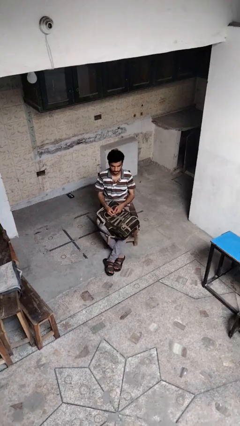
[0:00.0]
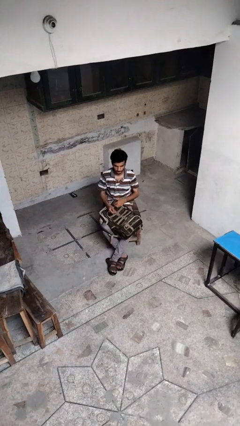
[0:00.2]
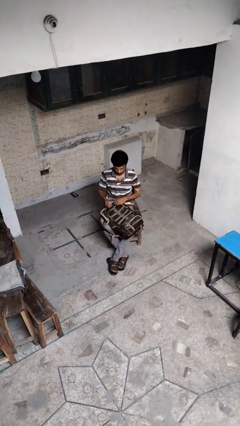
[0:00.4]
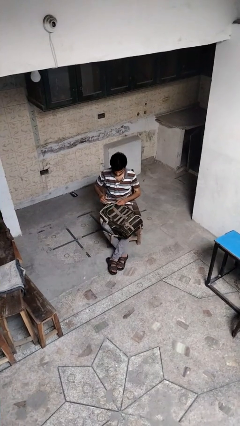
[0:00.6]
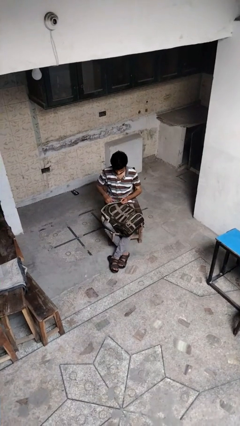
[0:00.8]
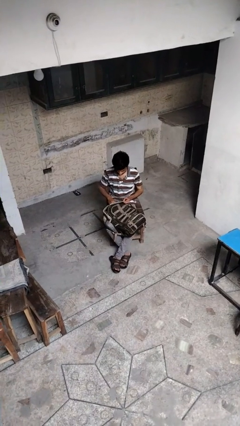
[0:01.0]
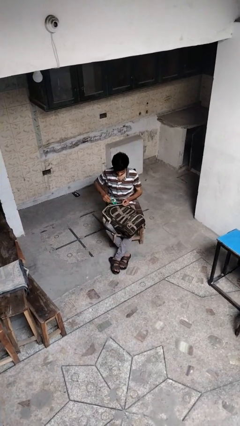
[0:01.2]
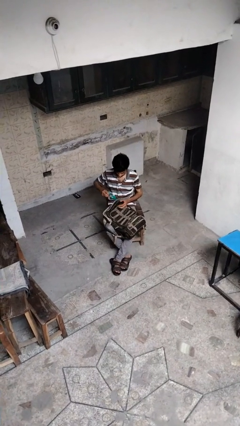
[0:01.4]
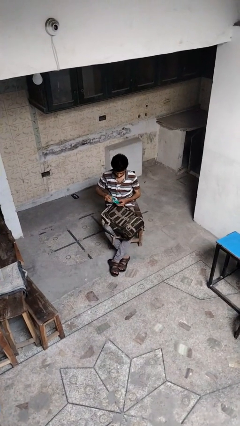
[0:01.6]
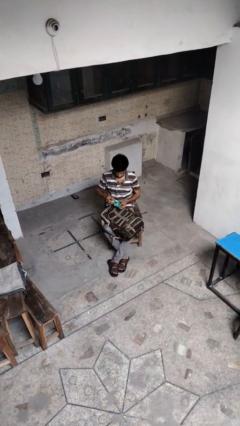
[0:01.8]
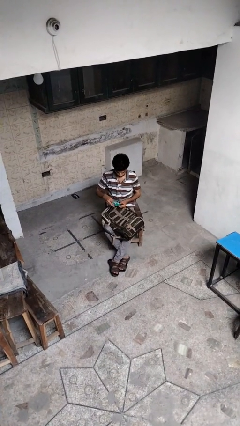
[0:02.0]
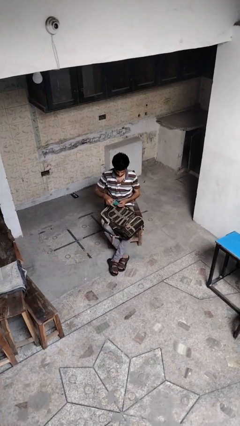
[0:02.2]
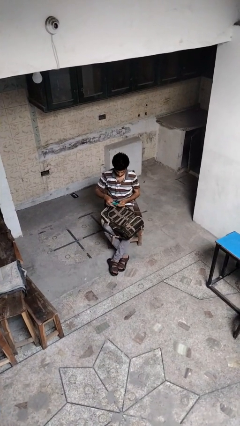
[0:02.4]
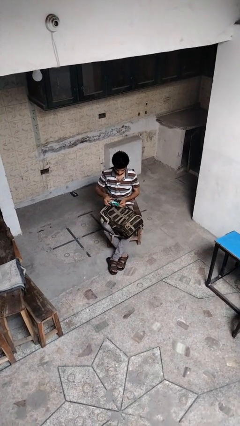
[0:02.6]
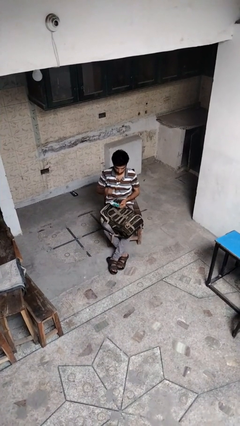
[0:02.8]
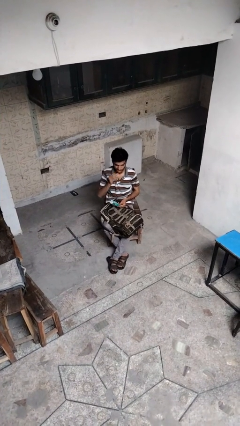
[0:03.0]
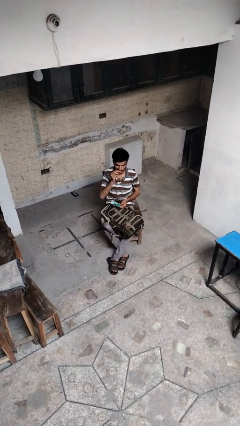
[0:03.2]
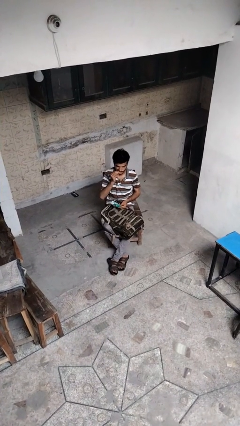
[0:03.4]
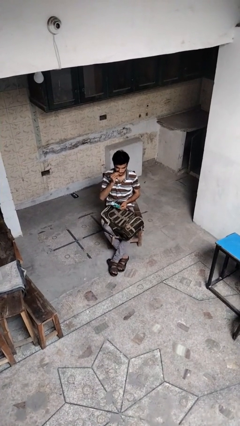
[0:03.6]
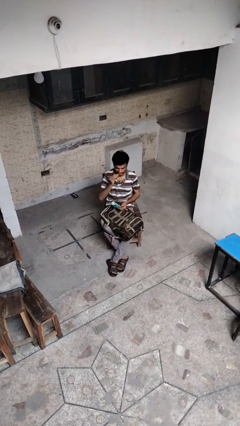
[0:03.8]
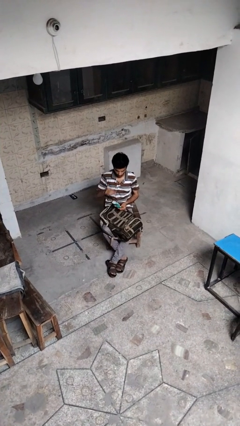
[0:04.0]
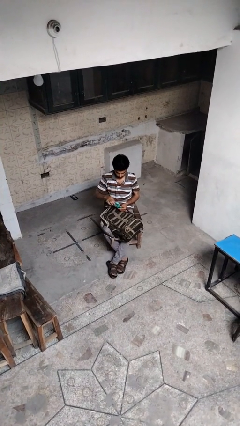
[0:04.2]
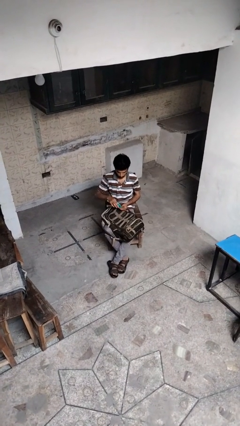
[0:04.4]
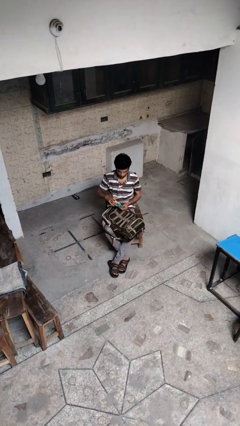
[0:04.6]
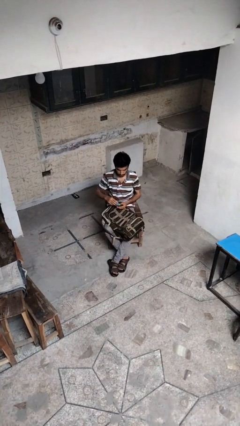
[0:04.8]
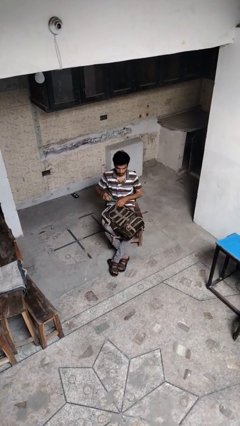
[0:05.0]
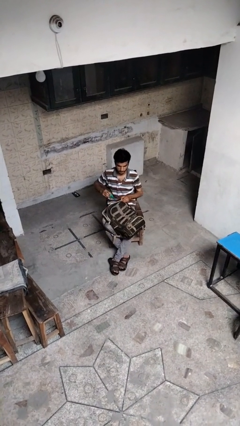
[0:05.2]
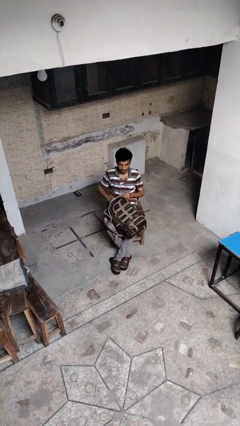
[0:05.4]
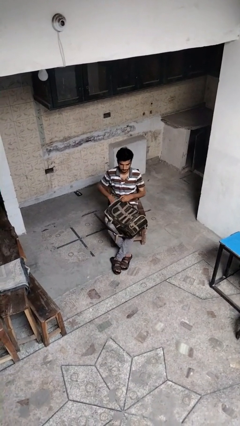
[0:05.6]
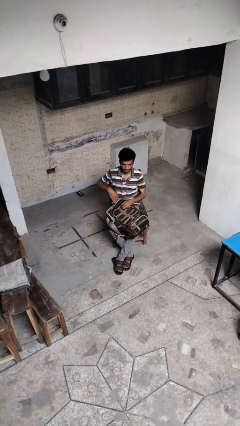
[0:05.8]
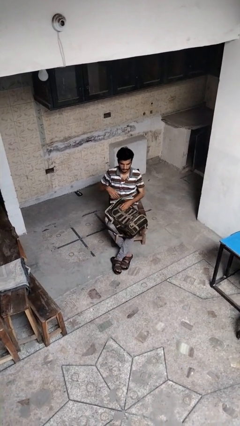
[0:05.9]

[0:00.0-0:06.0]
person eats snack from bag

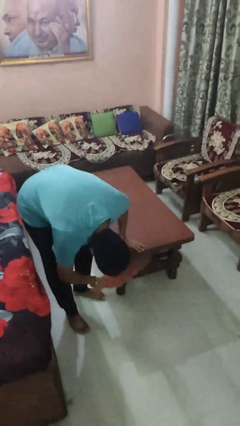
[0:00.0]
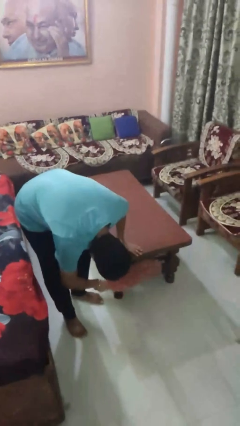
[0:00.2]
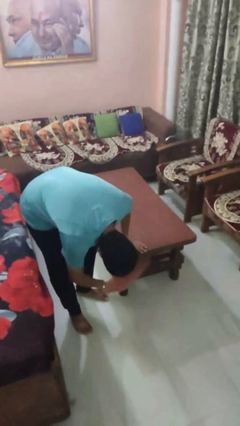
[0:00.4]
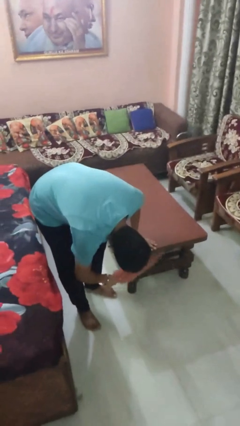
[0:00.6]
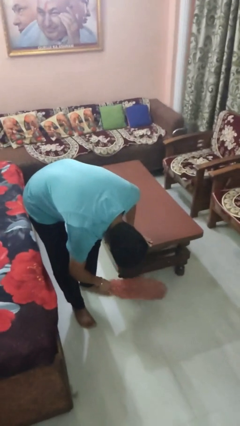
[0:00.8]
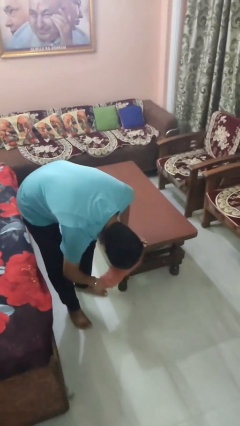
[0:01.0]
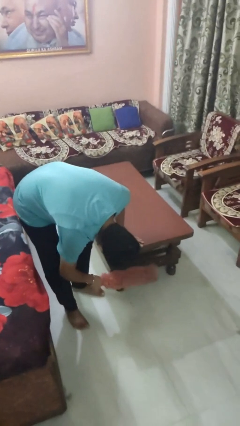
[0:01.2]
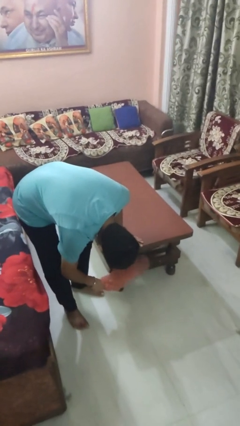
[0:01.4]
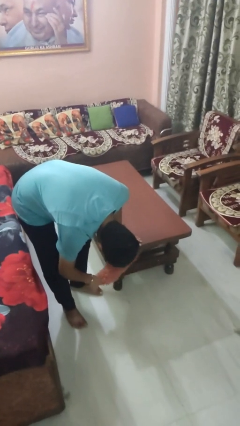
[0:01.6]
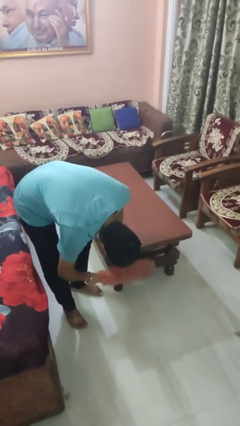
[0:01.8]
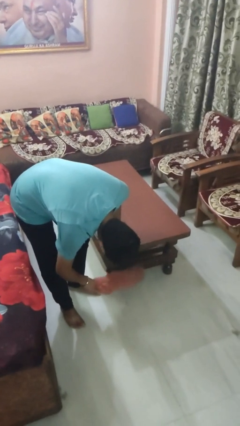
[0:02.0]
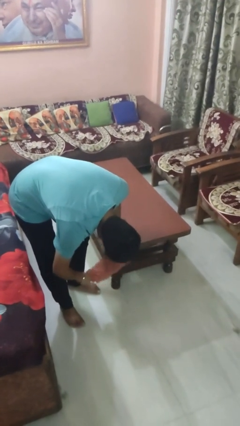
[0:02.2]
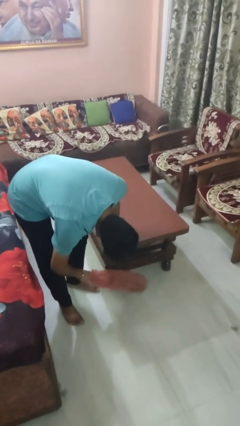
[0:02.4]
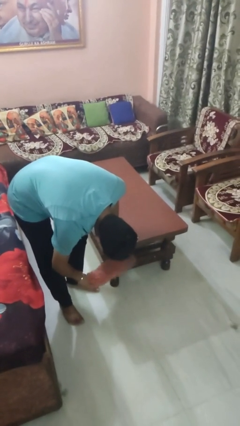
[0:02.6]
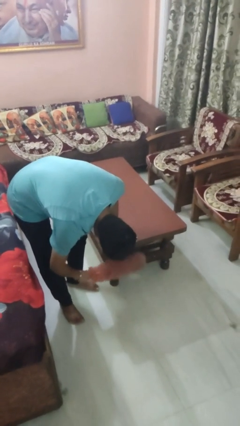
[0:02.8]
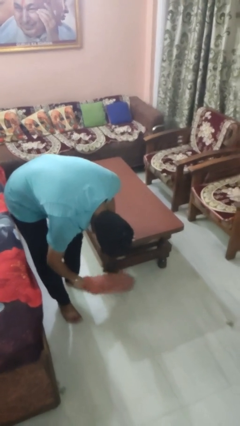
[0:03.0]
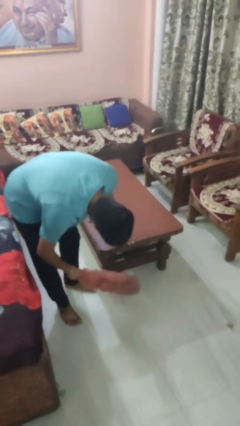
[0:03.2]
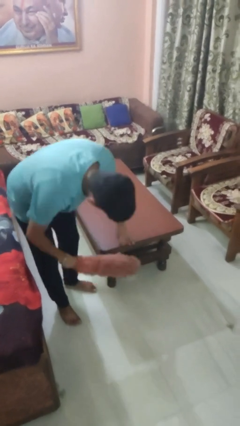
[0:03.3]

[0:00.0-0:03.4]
person dusts furniture

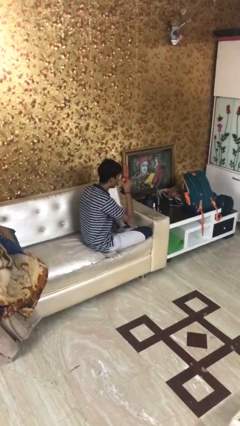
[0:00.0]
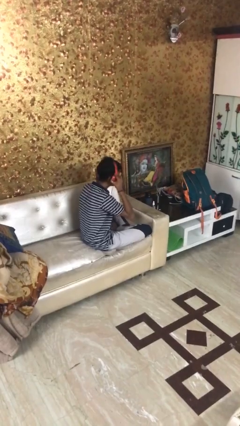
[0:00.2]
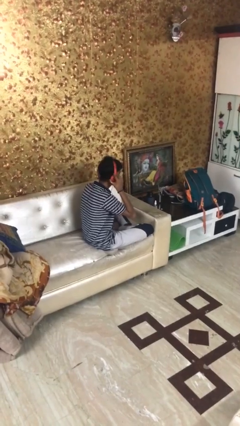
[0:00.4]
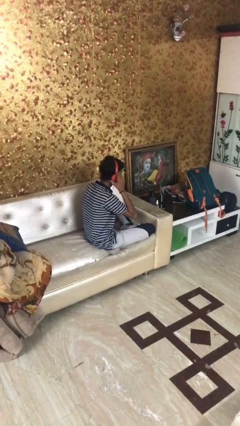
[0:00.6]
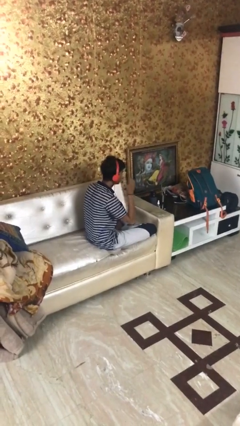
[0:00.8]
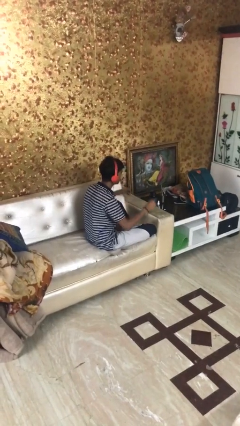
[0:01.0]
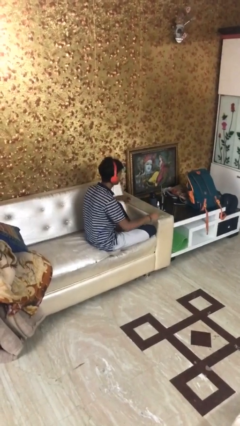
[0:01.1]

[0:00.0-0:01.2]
person puts on headphones

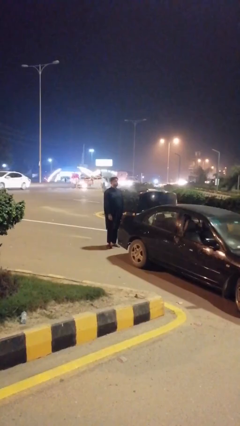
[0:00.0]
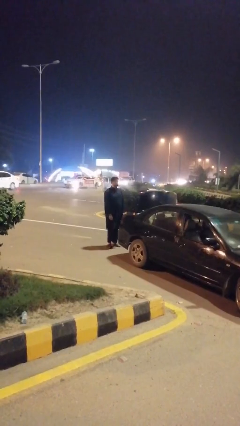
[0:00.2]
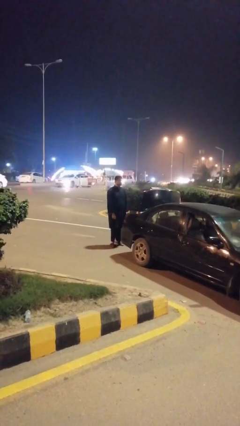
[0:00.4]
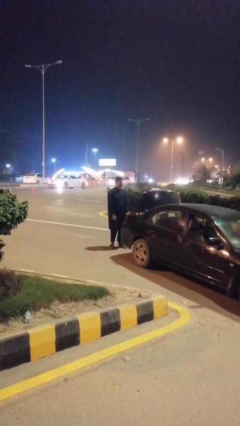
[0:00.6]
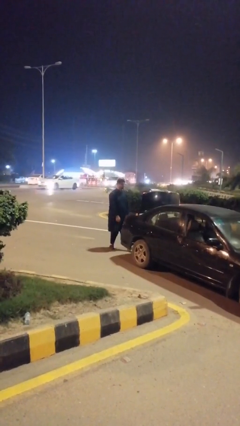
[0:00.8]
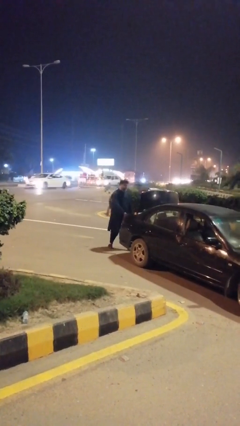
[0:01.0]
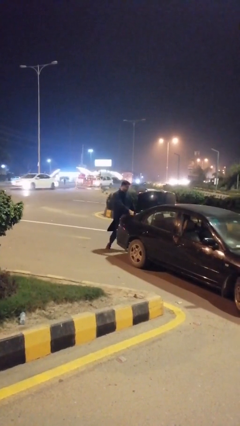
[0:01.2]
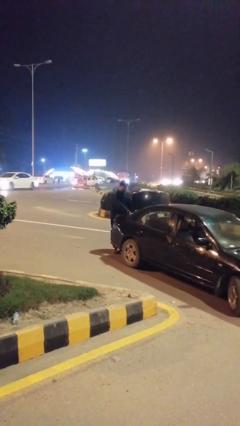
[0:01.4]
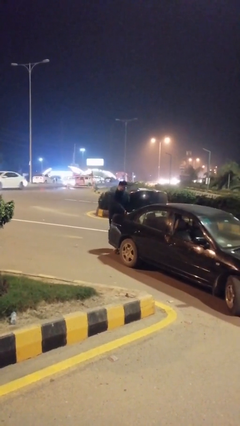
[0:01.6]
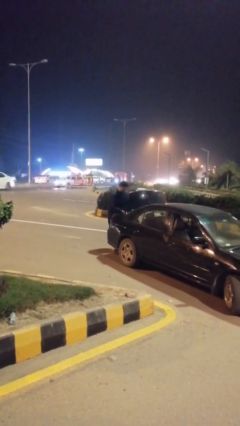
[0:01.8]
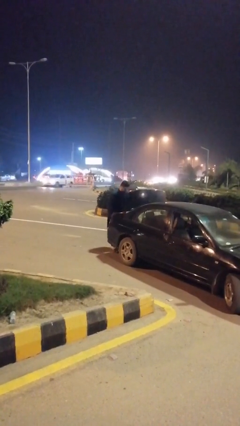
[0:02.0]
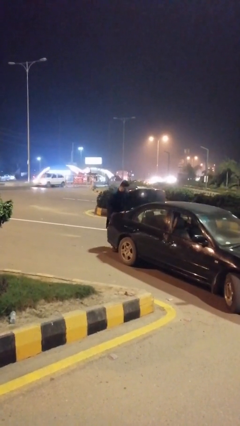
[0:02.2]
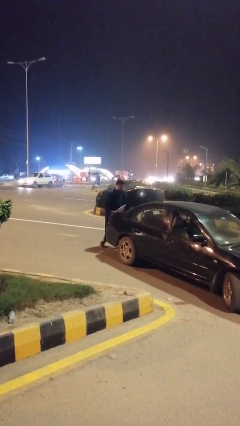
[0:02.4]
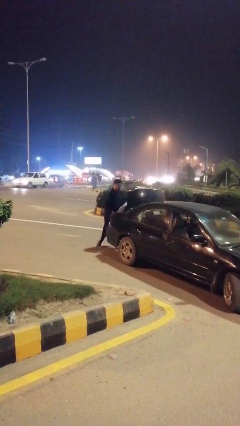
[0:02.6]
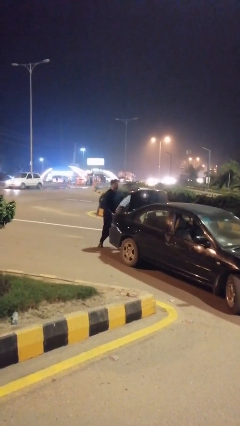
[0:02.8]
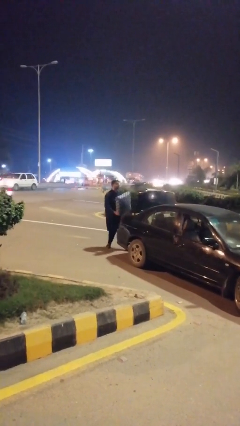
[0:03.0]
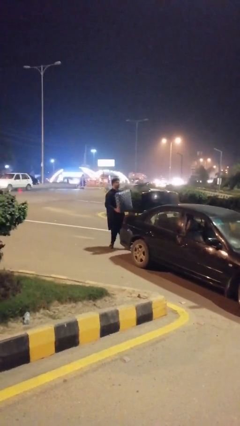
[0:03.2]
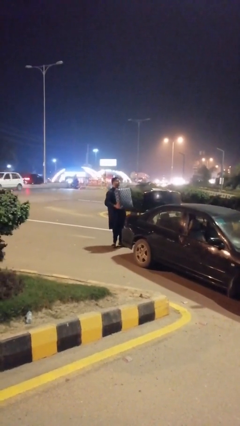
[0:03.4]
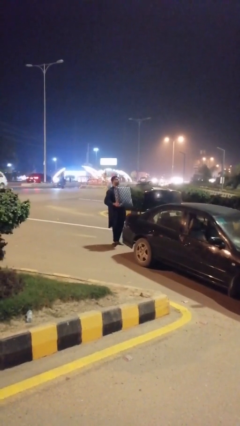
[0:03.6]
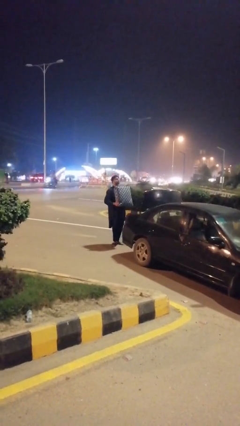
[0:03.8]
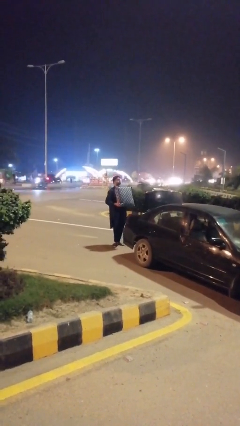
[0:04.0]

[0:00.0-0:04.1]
person unloads car

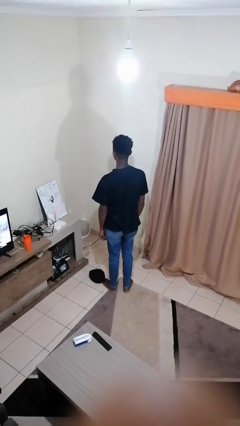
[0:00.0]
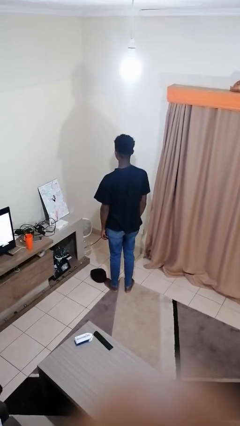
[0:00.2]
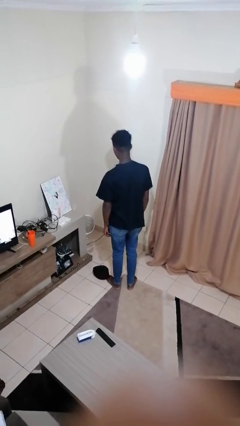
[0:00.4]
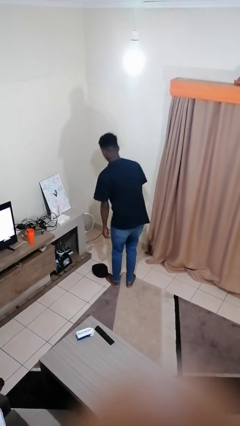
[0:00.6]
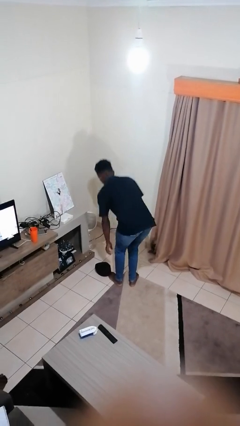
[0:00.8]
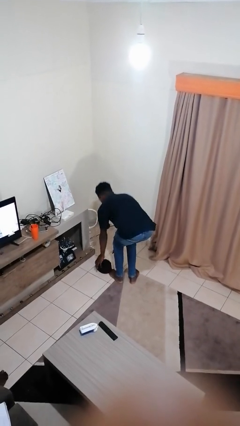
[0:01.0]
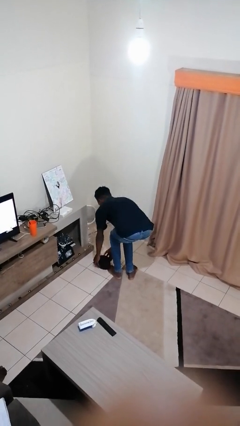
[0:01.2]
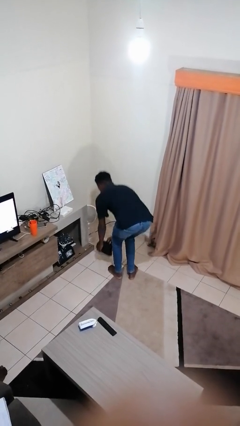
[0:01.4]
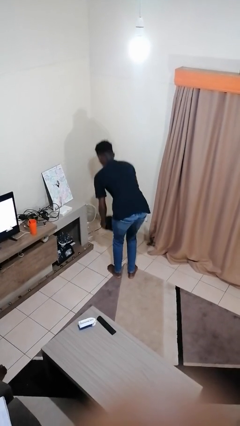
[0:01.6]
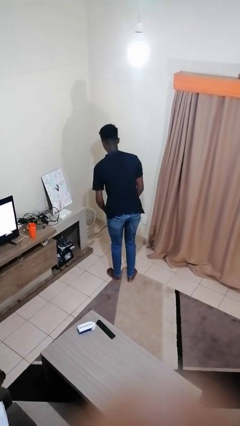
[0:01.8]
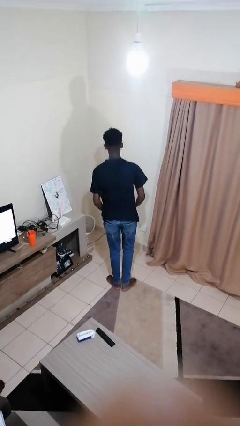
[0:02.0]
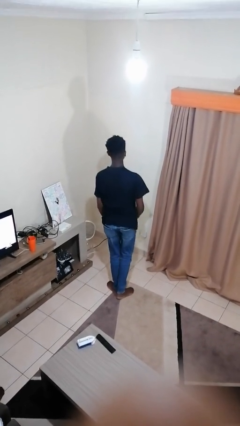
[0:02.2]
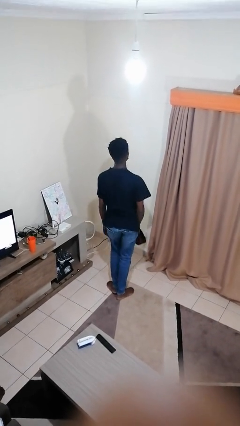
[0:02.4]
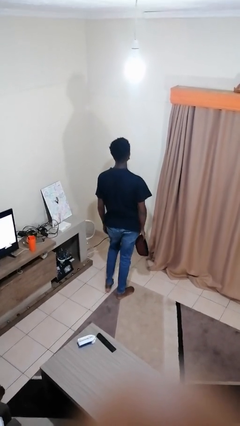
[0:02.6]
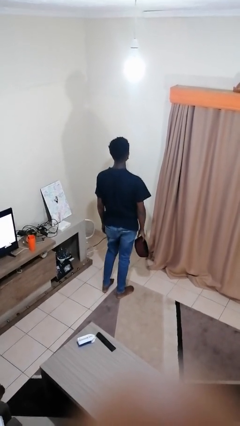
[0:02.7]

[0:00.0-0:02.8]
person picks up object from floor

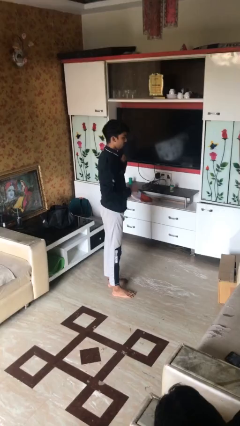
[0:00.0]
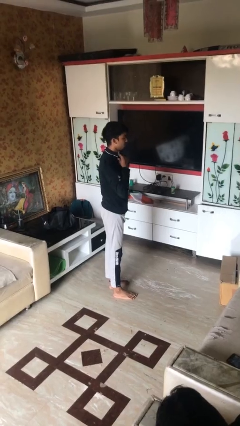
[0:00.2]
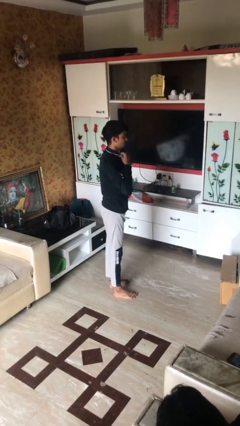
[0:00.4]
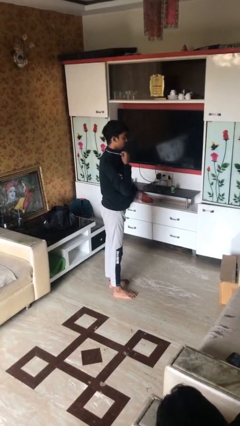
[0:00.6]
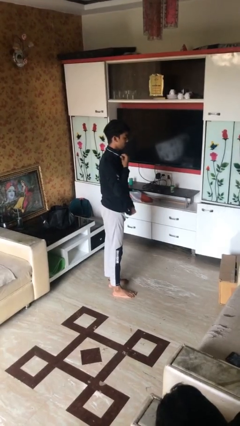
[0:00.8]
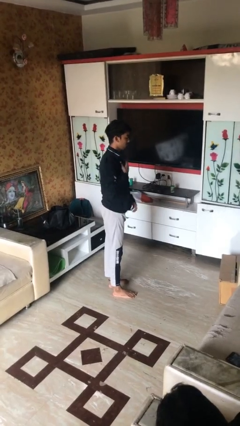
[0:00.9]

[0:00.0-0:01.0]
person unzips jacket
